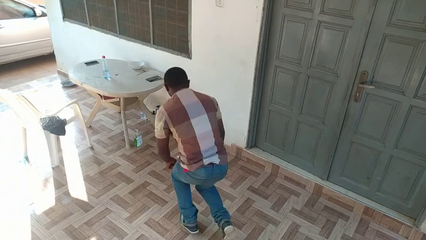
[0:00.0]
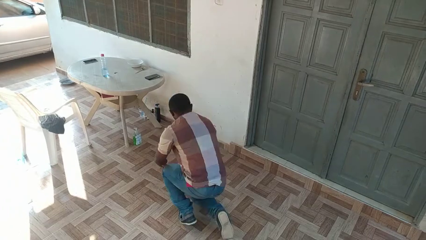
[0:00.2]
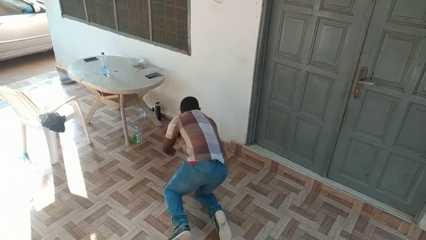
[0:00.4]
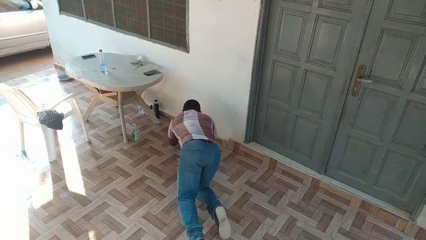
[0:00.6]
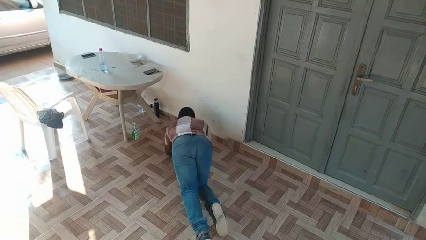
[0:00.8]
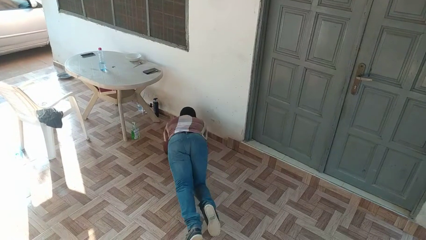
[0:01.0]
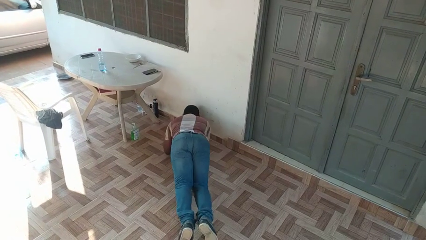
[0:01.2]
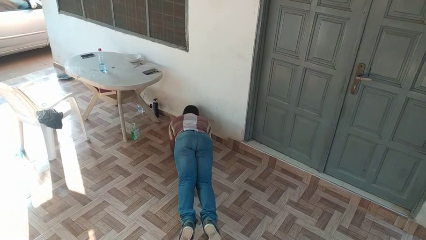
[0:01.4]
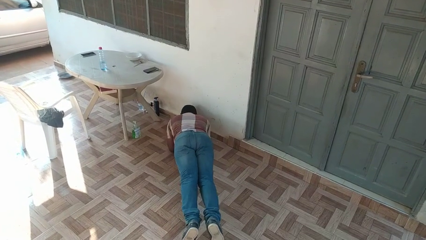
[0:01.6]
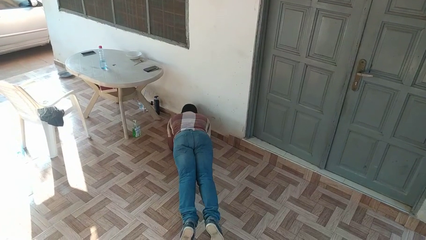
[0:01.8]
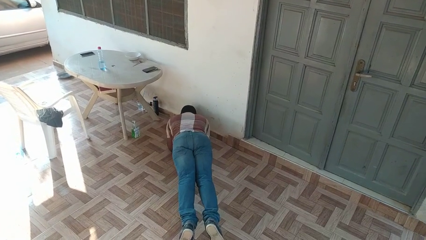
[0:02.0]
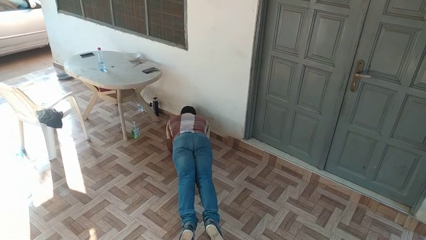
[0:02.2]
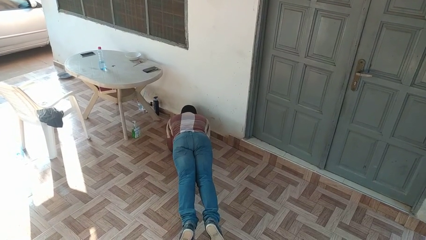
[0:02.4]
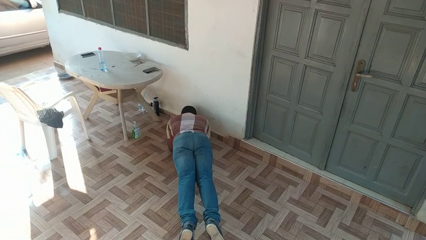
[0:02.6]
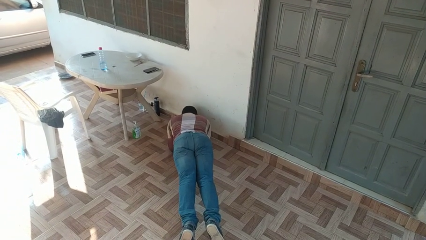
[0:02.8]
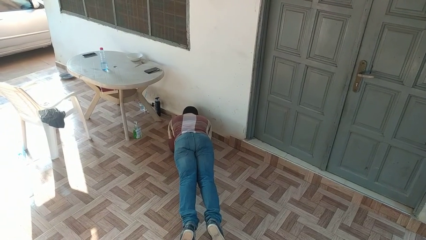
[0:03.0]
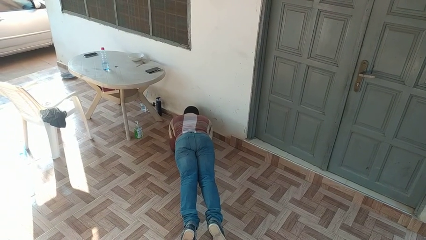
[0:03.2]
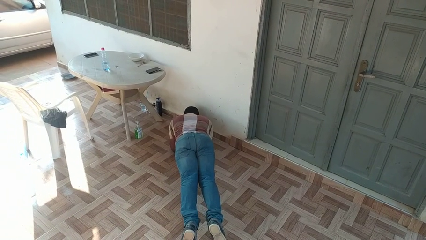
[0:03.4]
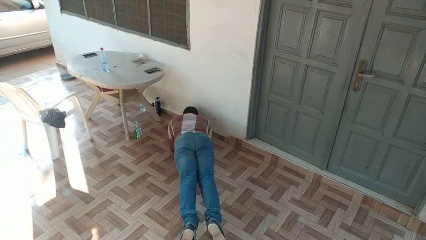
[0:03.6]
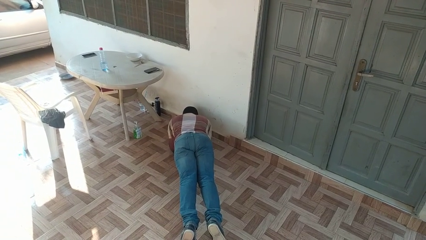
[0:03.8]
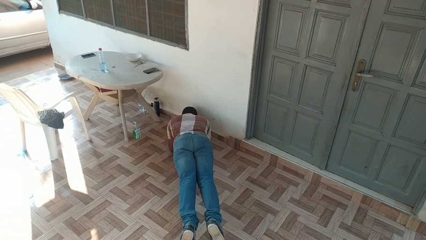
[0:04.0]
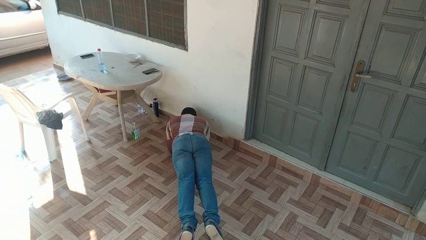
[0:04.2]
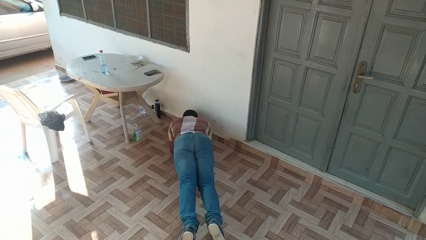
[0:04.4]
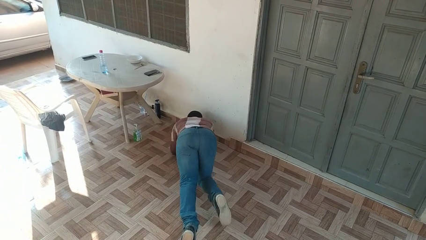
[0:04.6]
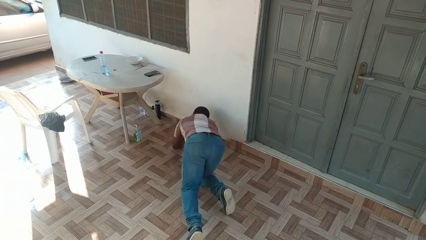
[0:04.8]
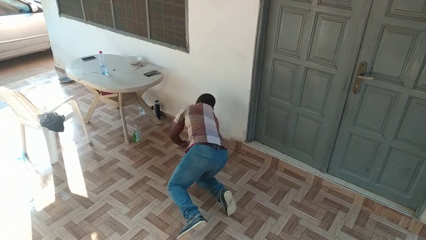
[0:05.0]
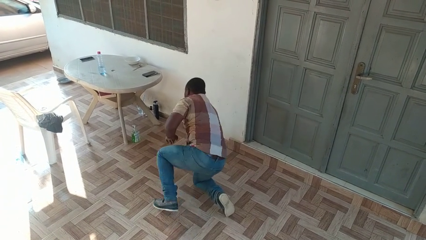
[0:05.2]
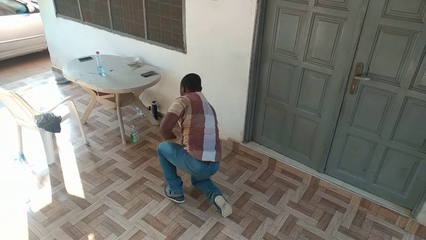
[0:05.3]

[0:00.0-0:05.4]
person exercises with plank

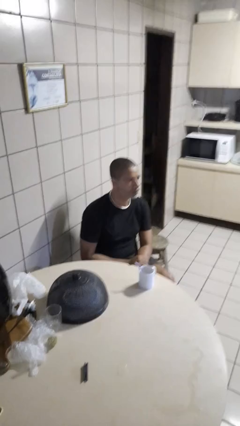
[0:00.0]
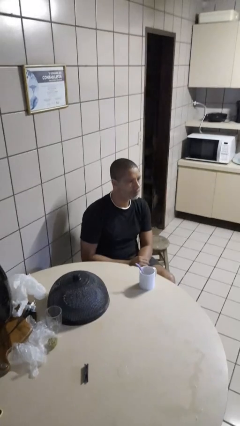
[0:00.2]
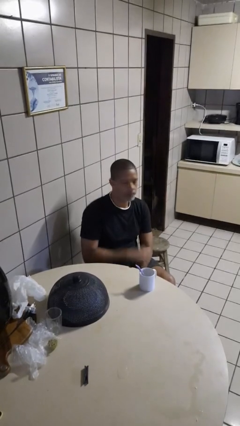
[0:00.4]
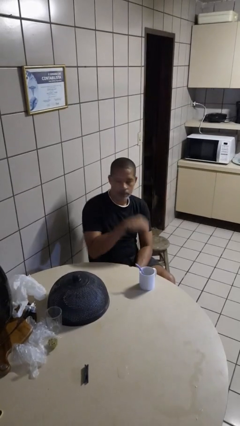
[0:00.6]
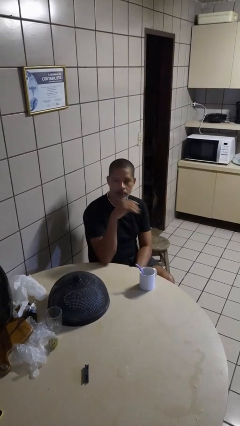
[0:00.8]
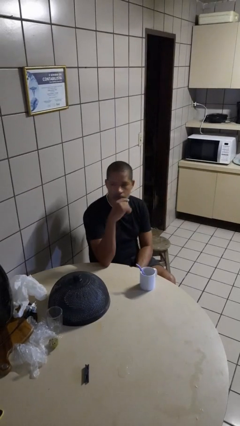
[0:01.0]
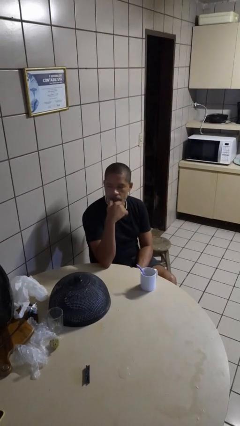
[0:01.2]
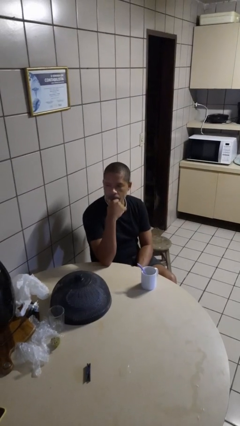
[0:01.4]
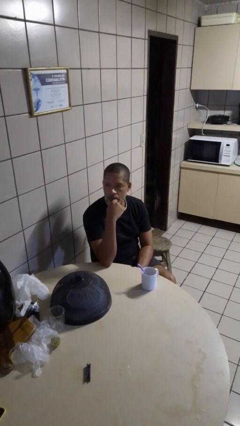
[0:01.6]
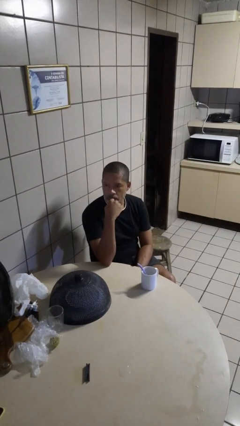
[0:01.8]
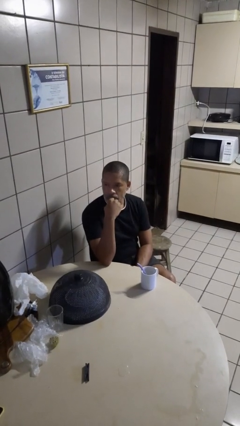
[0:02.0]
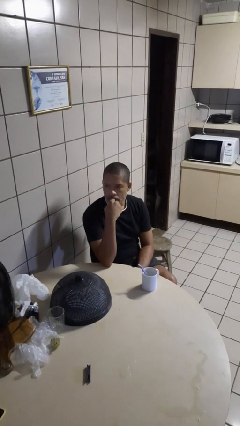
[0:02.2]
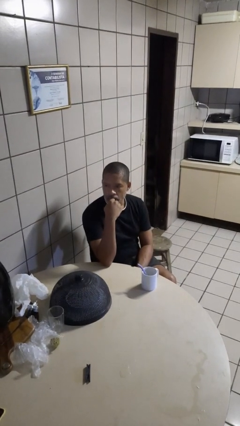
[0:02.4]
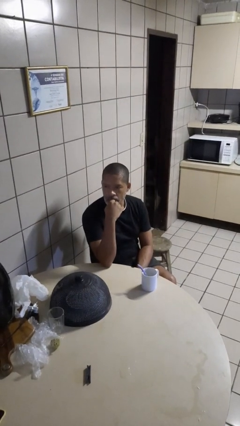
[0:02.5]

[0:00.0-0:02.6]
person strokes chin

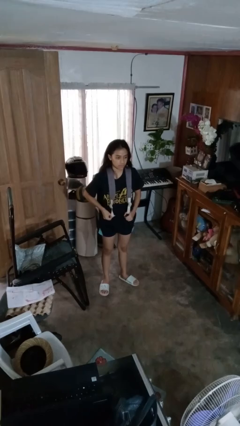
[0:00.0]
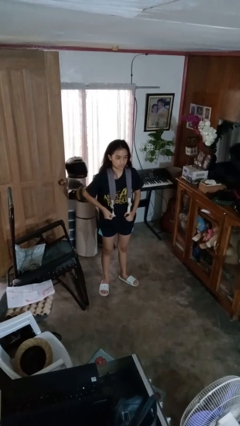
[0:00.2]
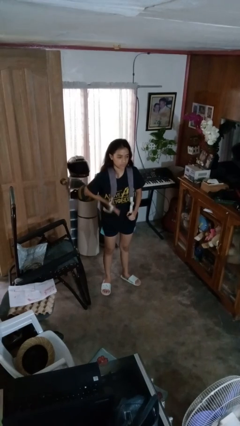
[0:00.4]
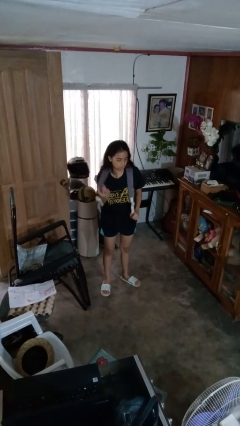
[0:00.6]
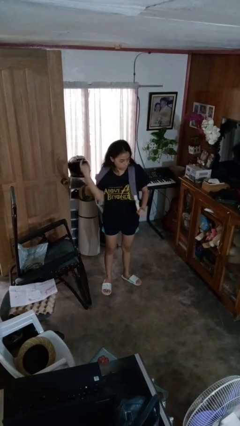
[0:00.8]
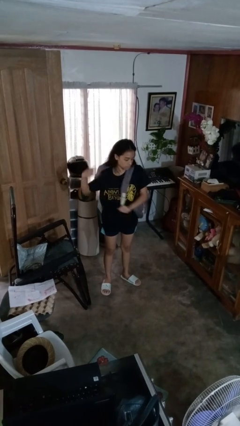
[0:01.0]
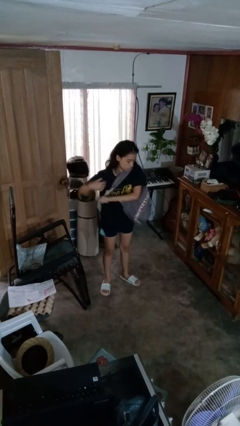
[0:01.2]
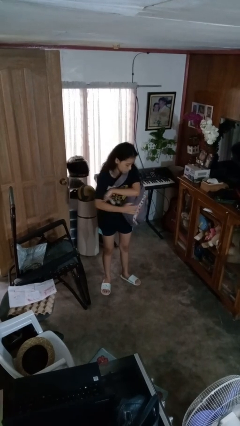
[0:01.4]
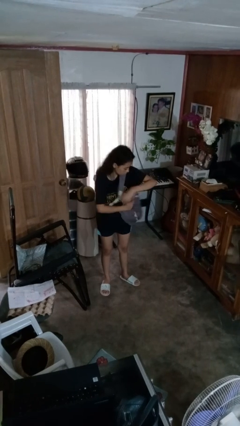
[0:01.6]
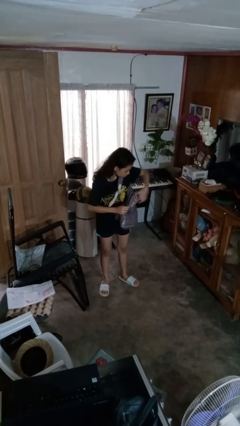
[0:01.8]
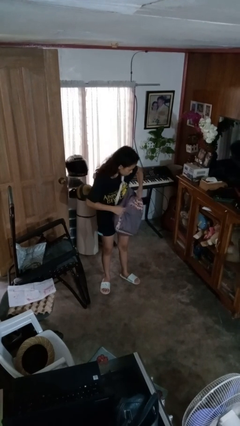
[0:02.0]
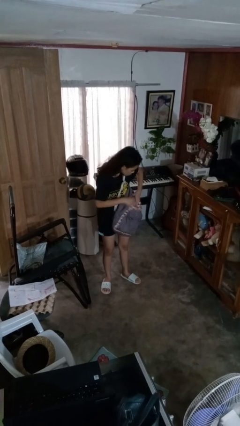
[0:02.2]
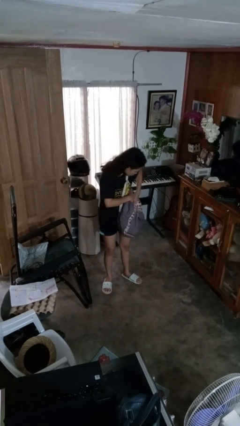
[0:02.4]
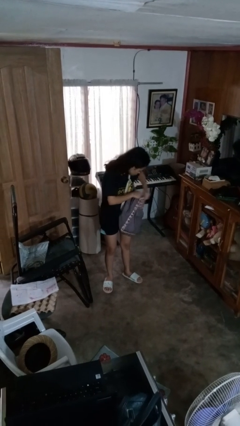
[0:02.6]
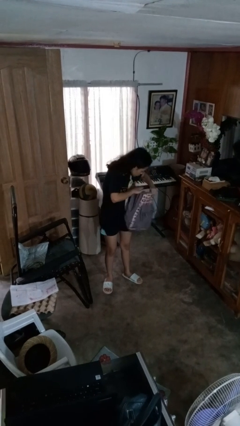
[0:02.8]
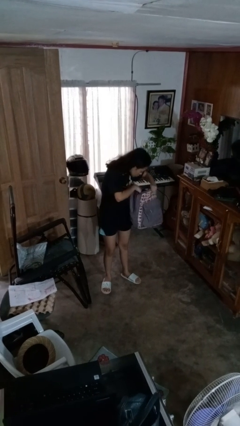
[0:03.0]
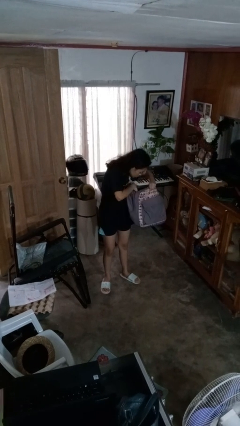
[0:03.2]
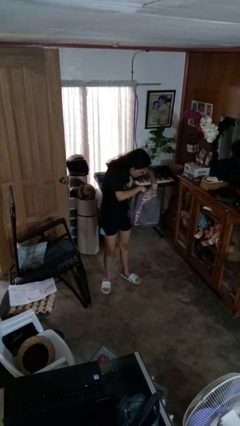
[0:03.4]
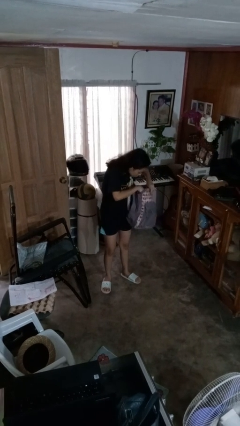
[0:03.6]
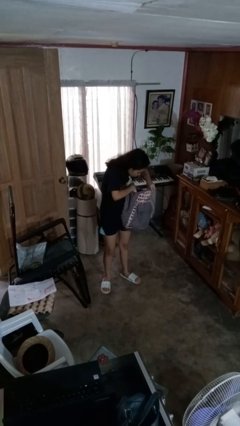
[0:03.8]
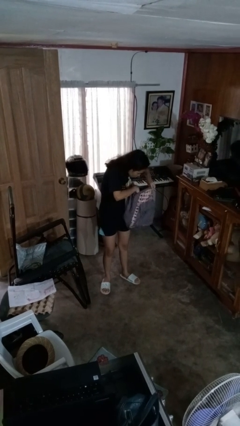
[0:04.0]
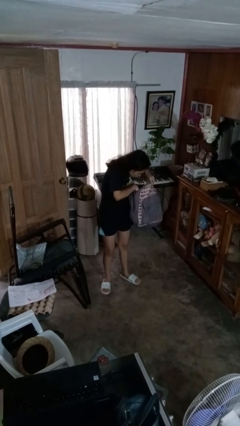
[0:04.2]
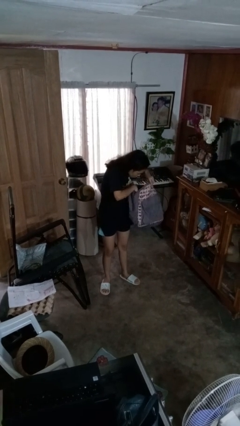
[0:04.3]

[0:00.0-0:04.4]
person searches in backpack

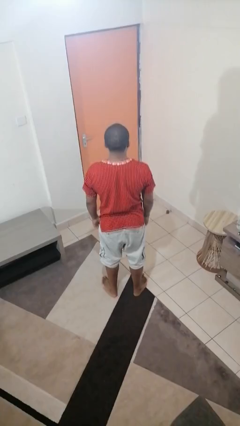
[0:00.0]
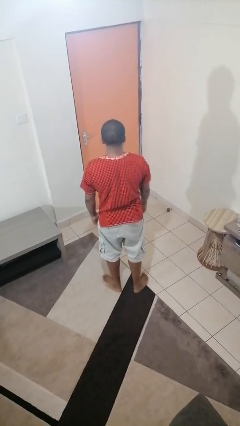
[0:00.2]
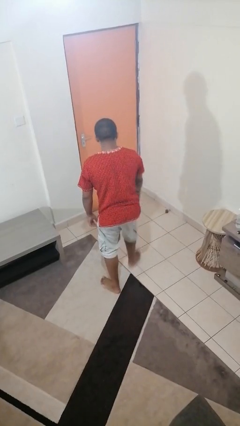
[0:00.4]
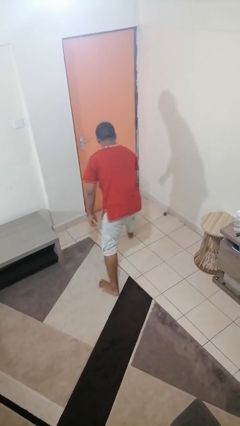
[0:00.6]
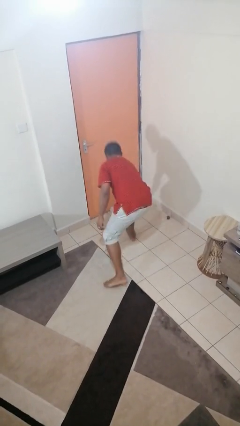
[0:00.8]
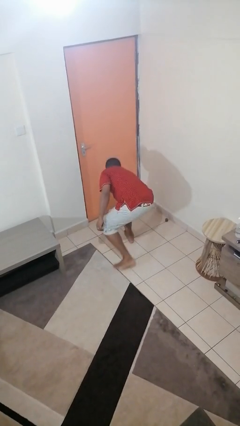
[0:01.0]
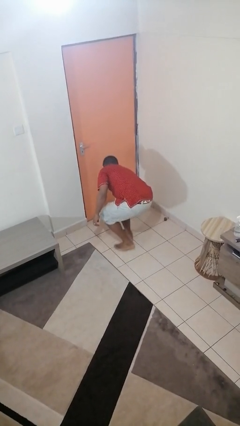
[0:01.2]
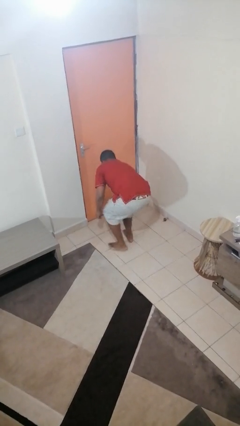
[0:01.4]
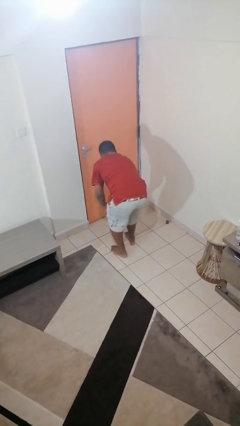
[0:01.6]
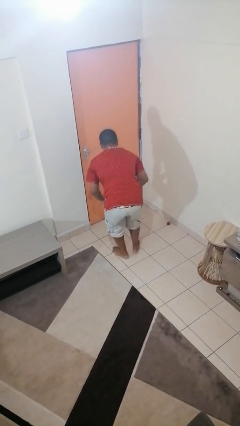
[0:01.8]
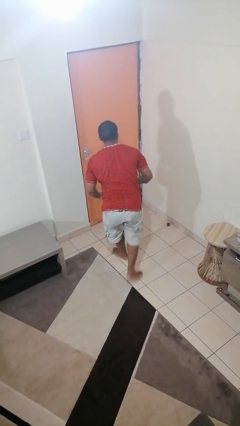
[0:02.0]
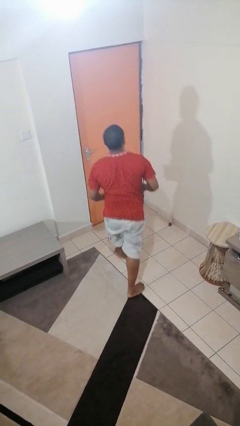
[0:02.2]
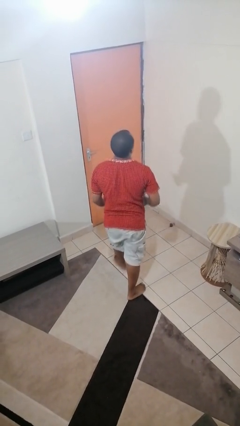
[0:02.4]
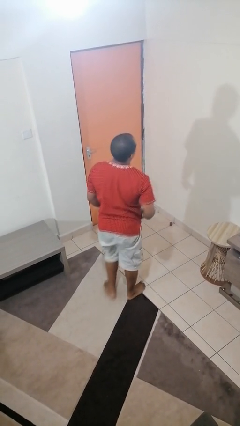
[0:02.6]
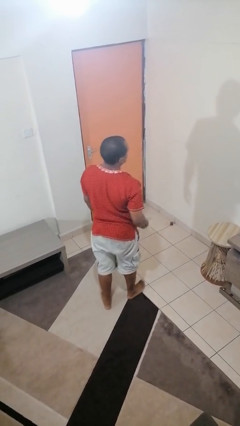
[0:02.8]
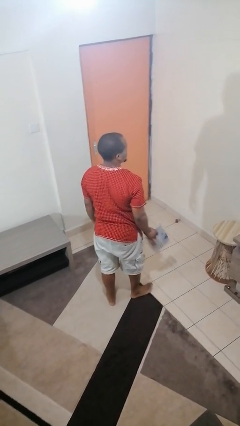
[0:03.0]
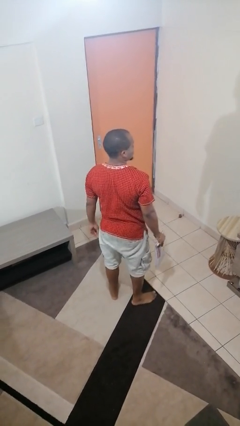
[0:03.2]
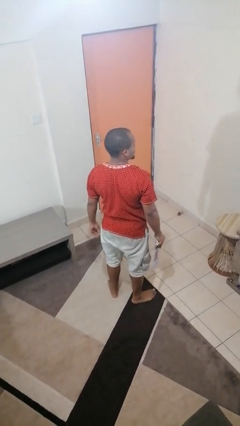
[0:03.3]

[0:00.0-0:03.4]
person picks up object from floor

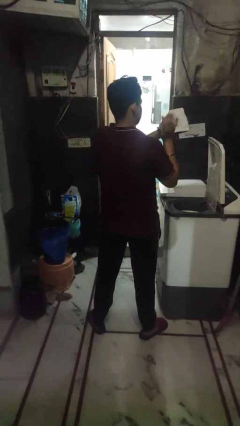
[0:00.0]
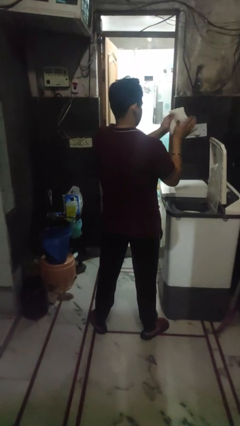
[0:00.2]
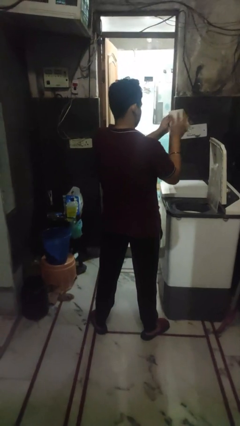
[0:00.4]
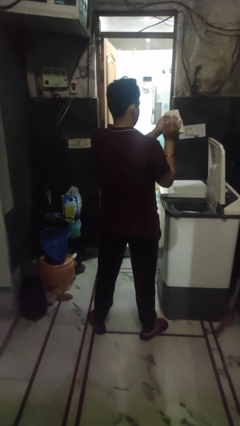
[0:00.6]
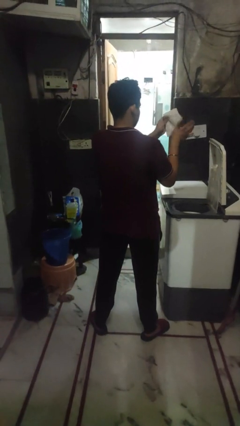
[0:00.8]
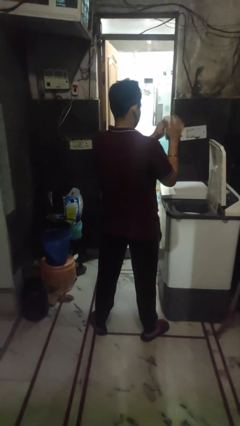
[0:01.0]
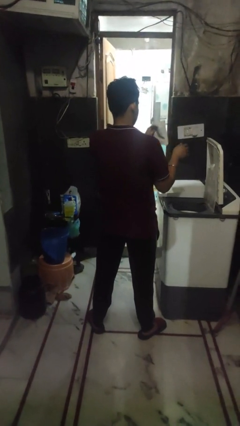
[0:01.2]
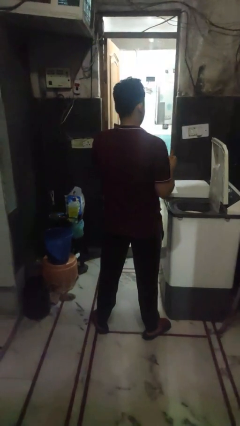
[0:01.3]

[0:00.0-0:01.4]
person cleans dryer lint trap

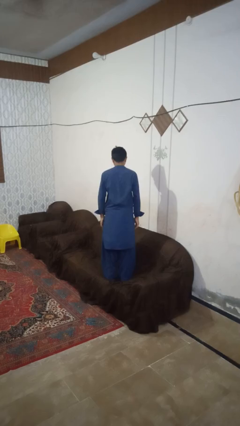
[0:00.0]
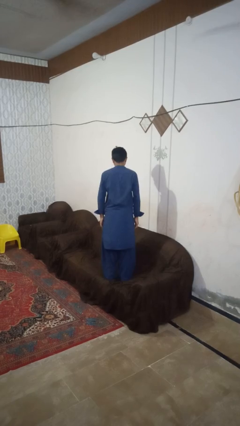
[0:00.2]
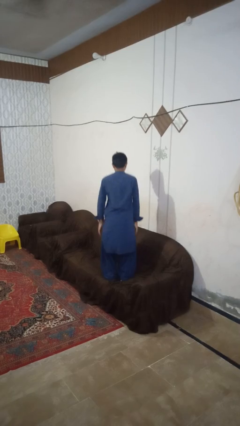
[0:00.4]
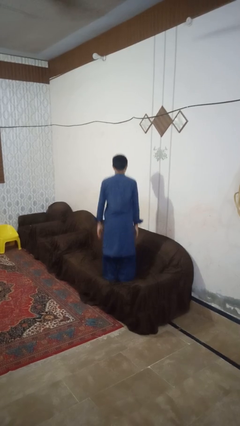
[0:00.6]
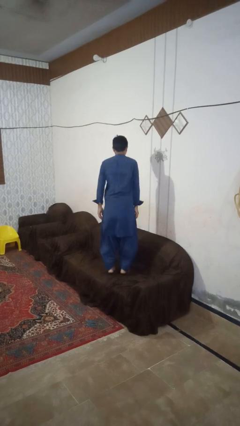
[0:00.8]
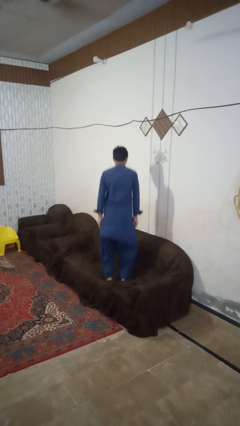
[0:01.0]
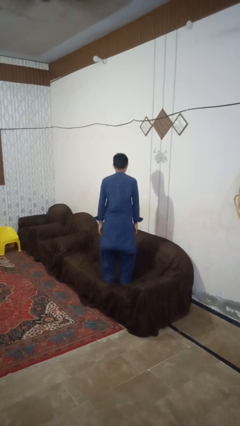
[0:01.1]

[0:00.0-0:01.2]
person jumps on couch
